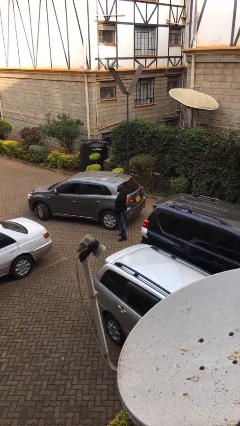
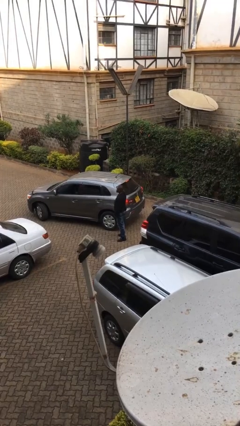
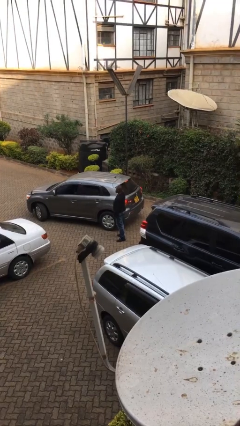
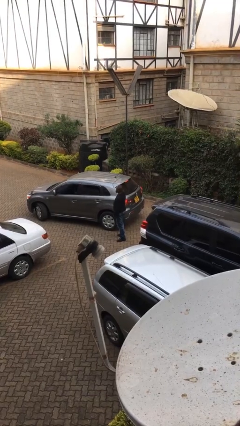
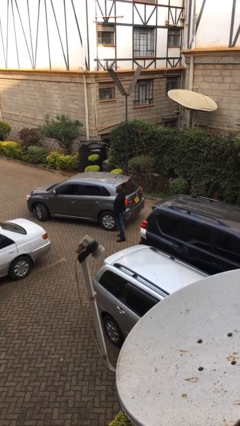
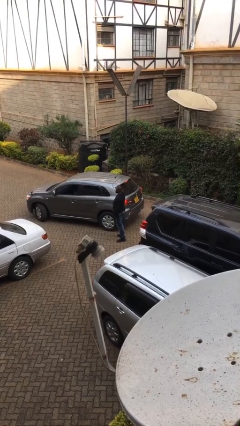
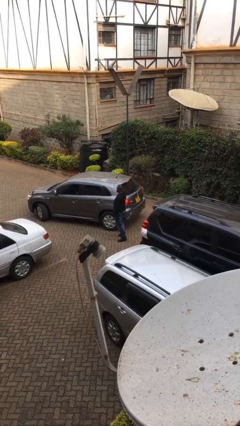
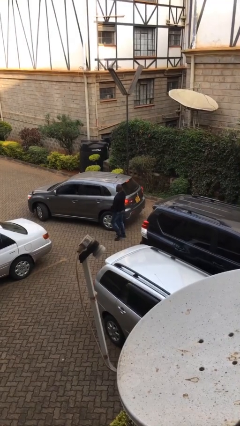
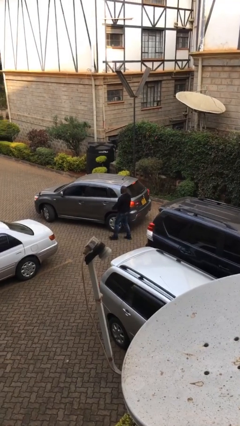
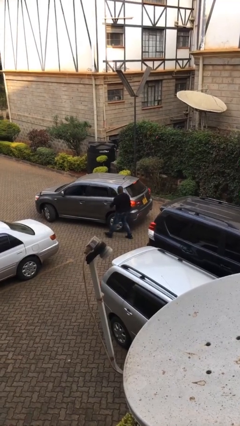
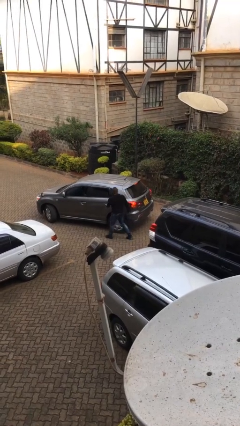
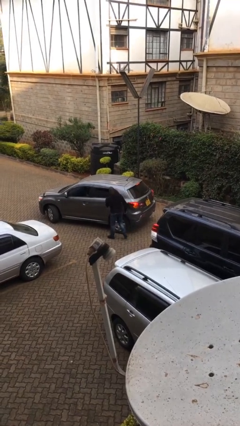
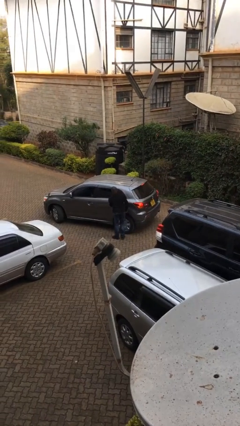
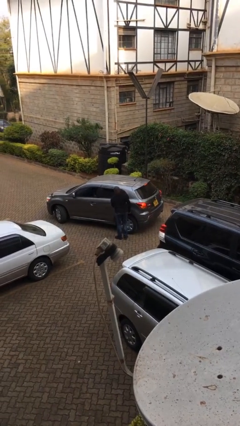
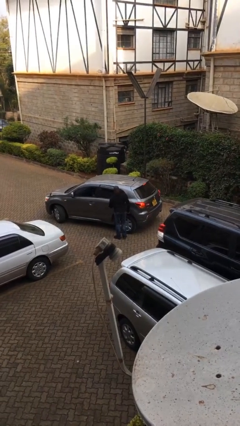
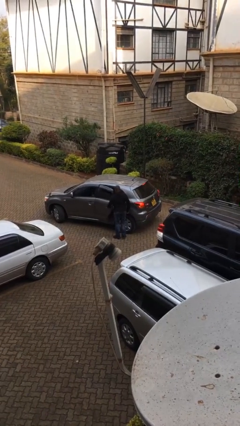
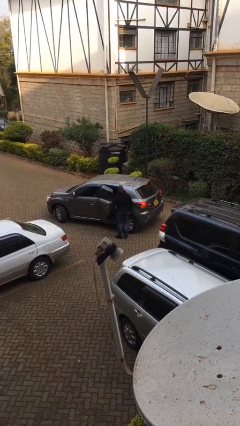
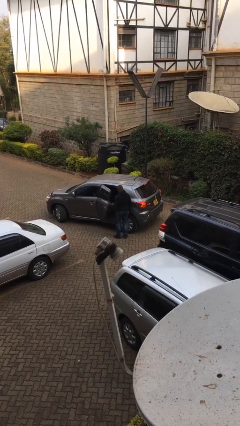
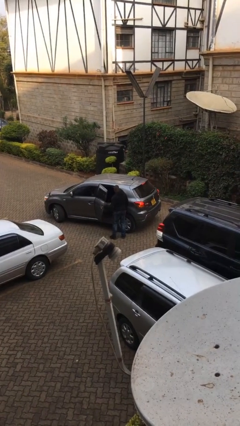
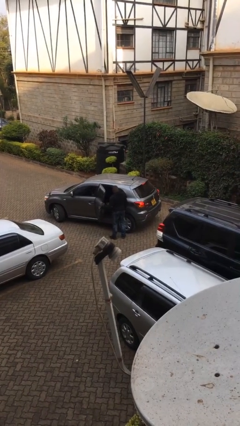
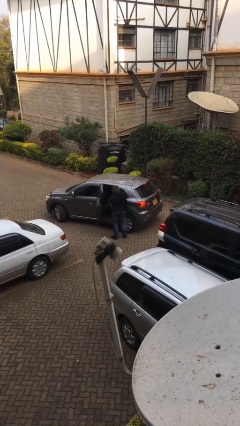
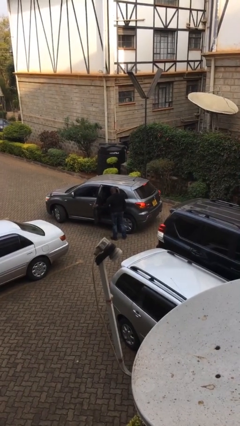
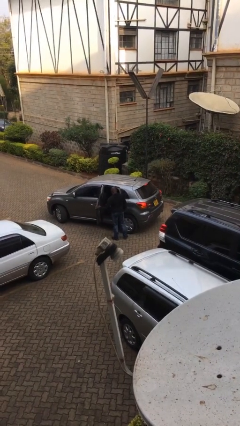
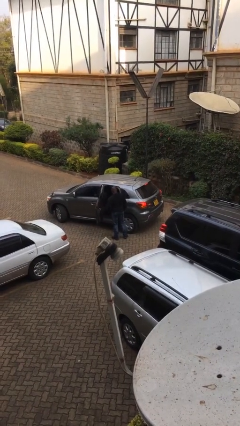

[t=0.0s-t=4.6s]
person opens car door

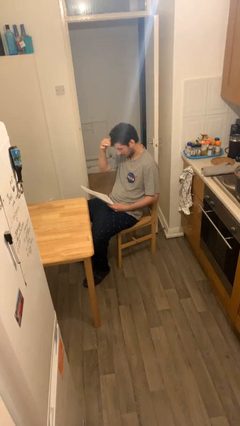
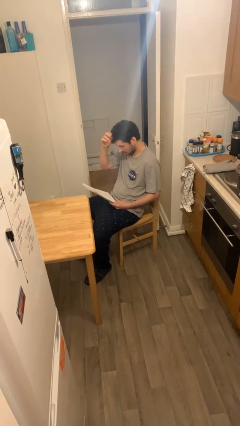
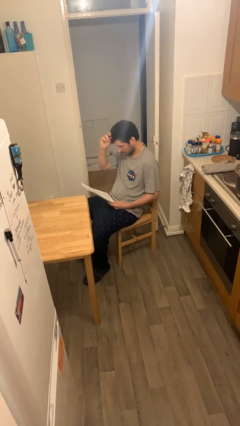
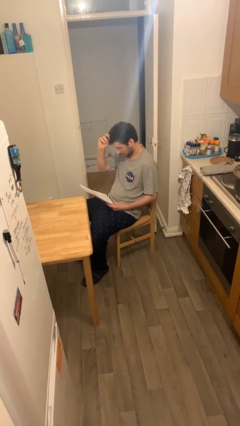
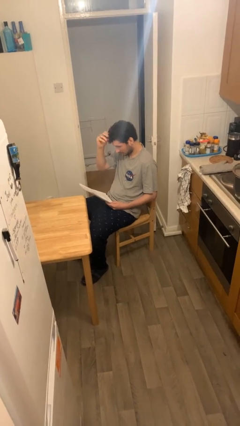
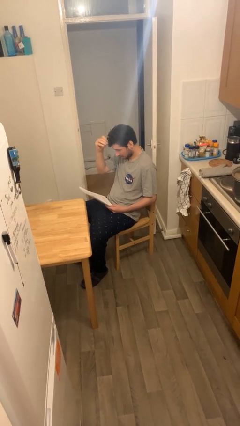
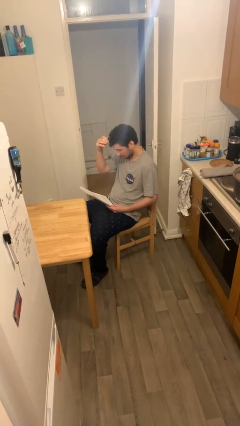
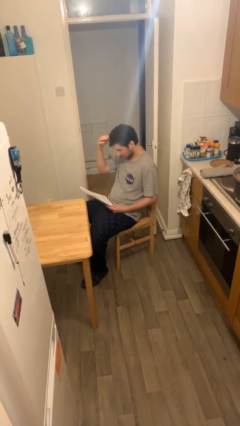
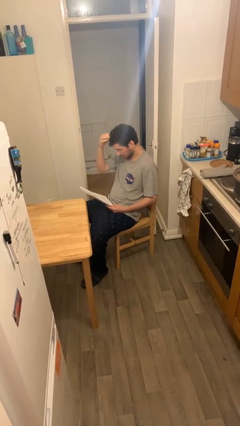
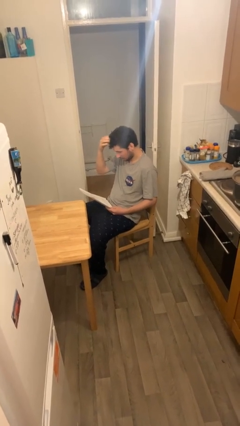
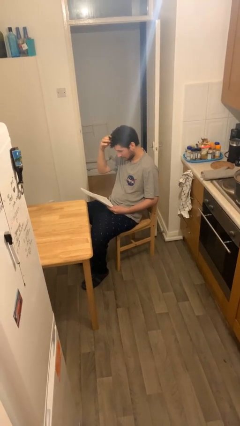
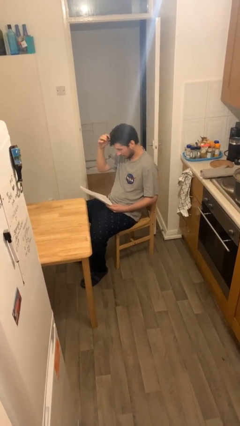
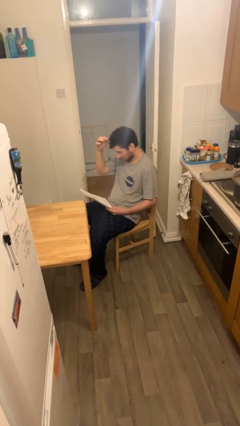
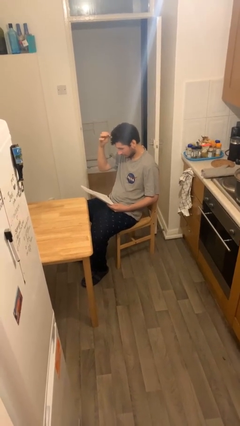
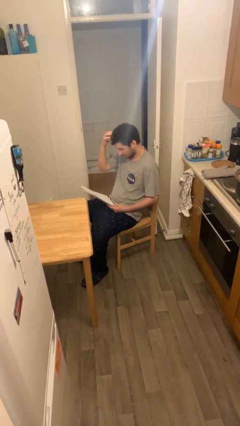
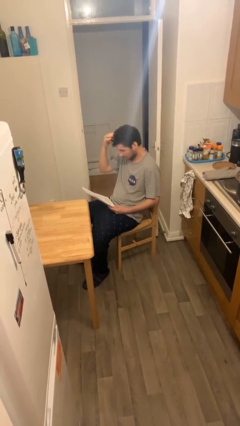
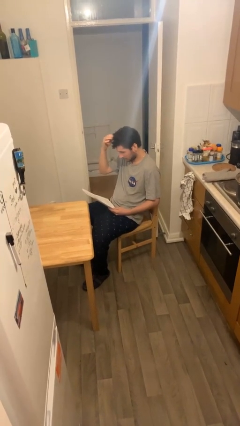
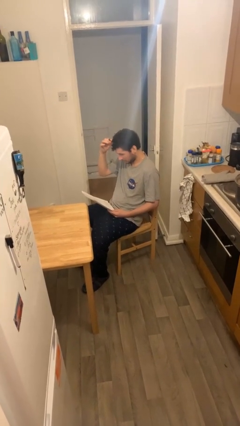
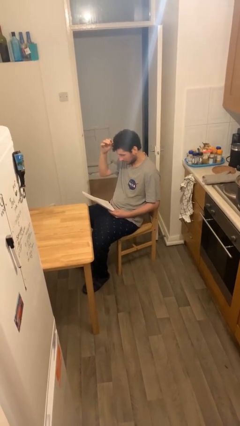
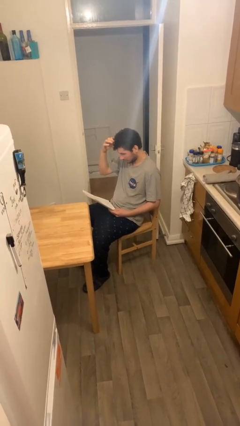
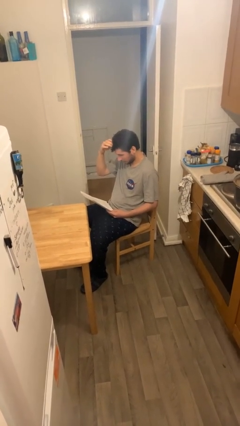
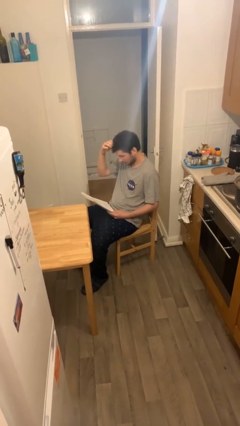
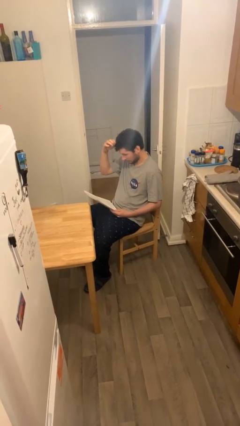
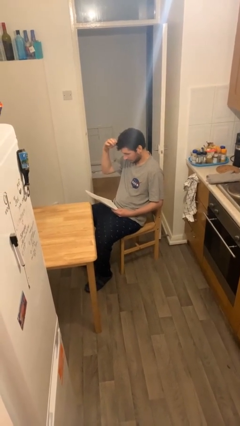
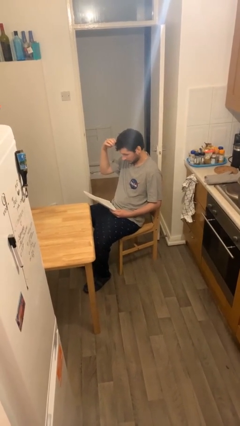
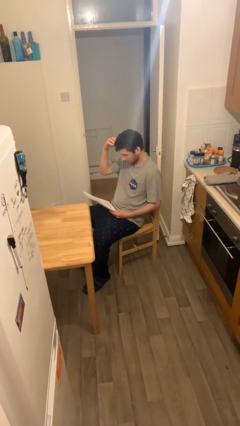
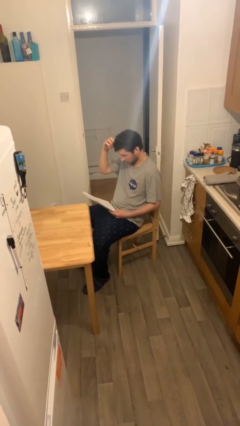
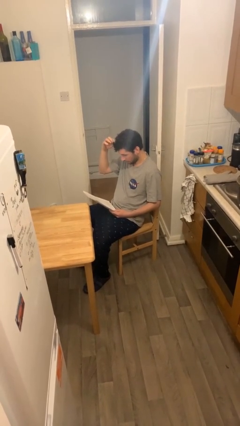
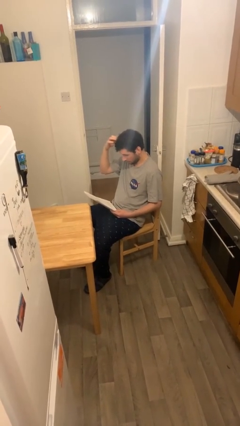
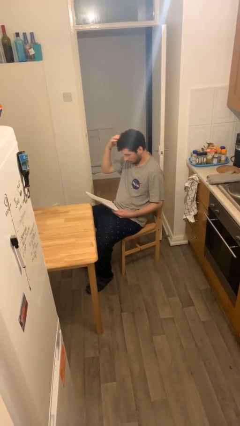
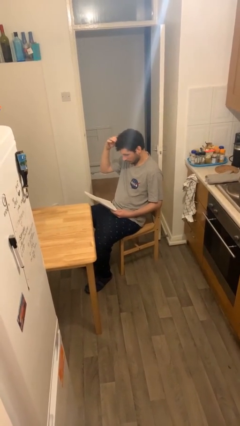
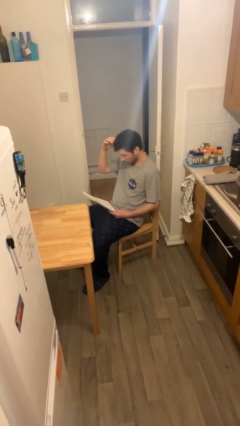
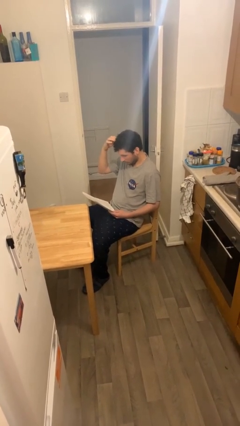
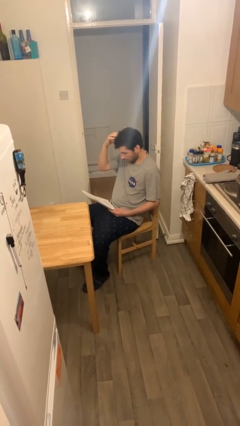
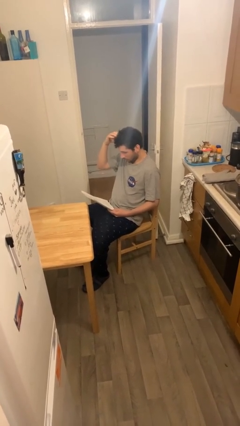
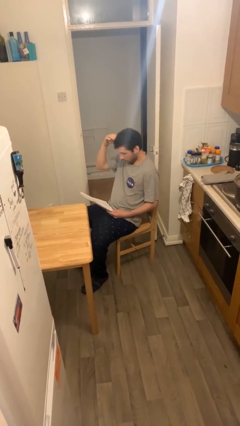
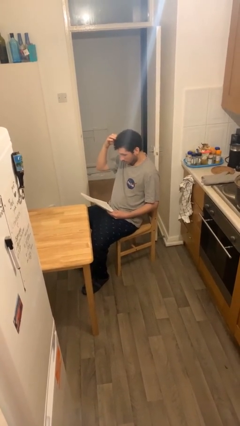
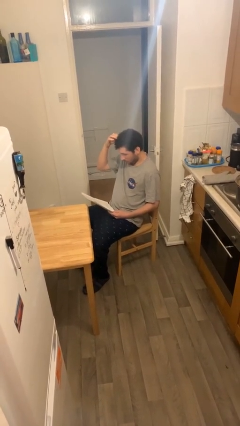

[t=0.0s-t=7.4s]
person reads document

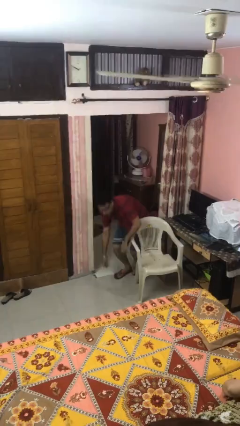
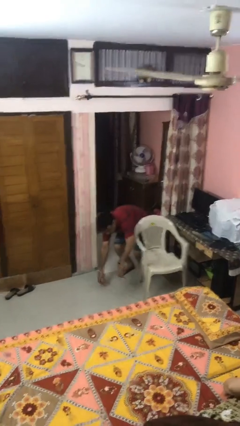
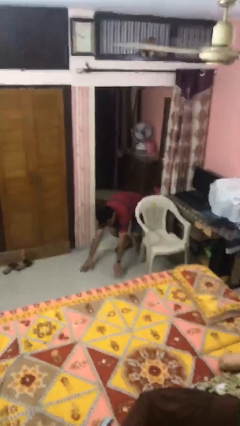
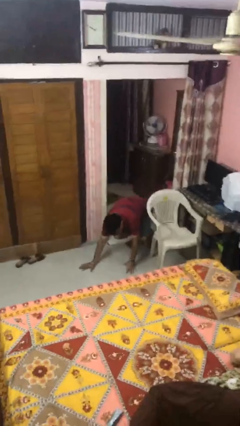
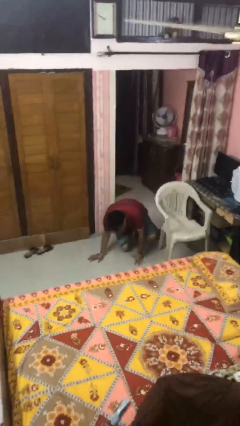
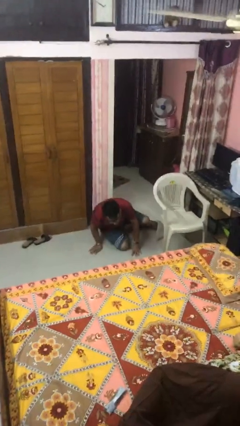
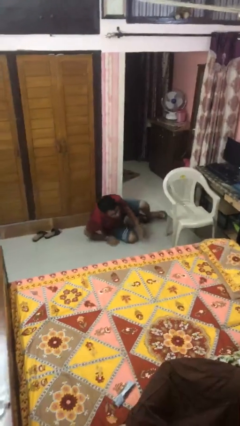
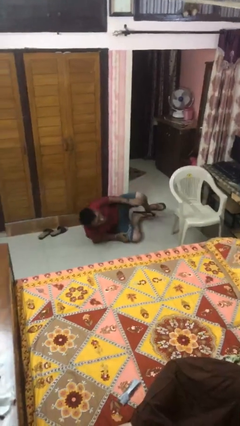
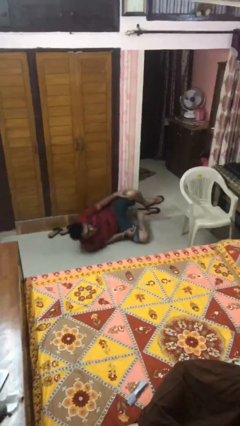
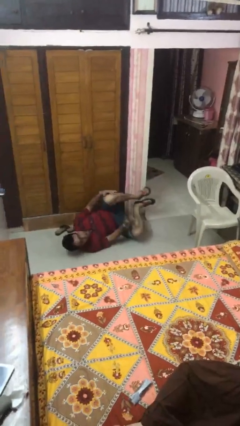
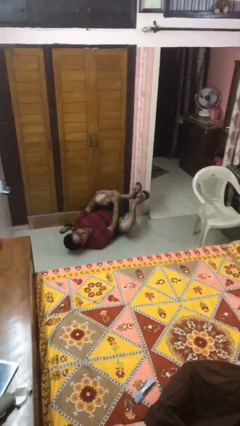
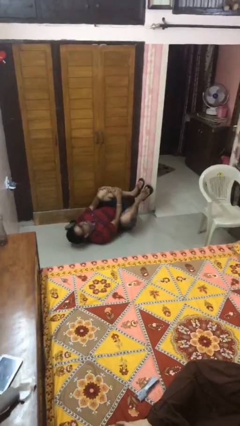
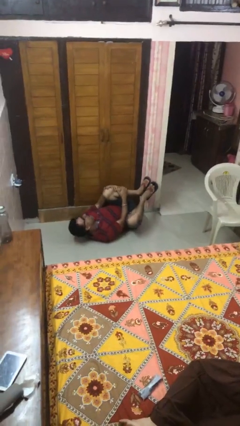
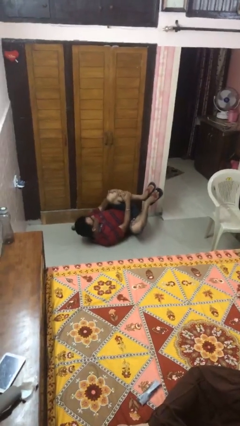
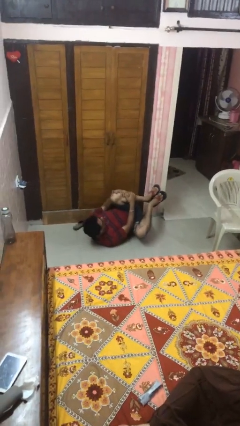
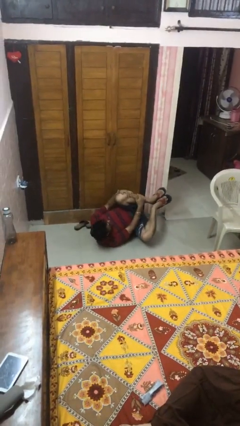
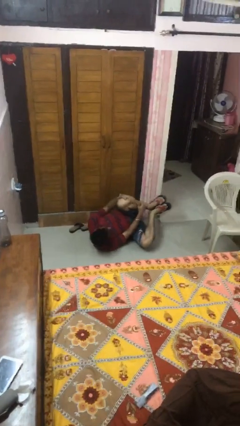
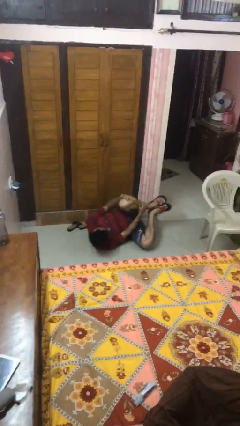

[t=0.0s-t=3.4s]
person lies down on floor

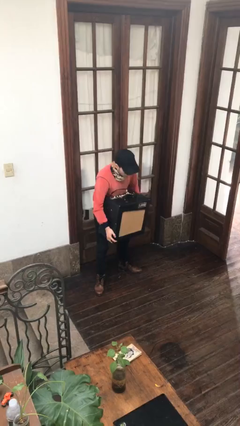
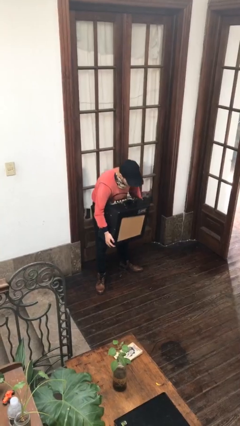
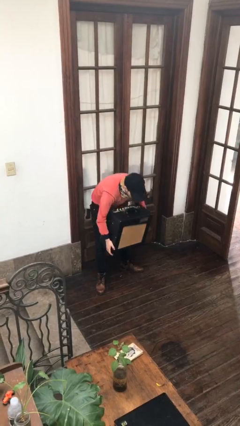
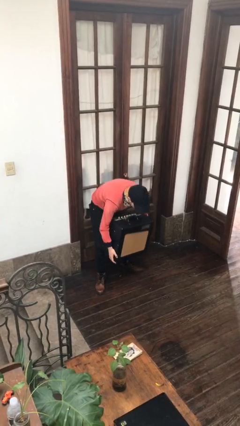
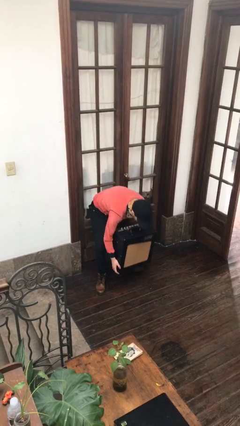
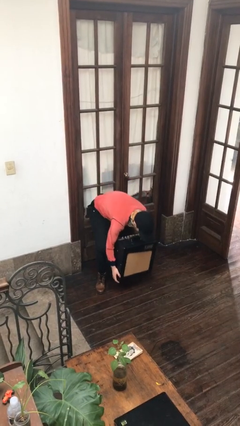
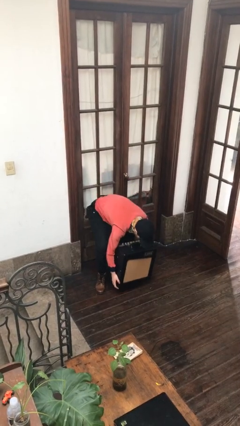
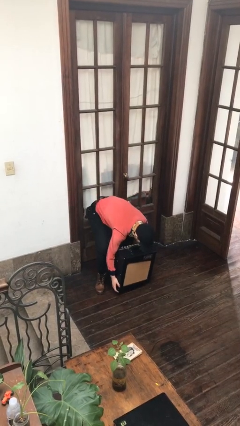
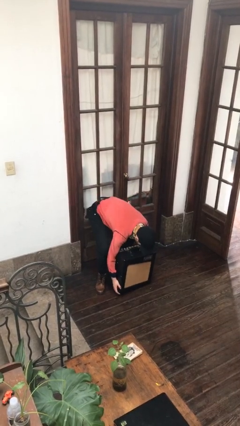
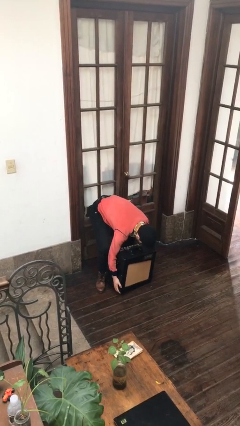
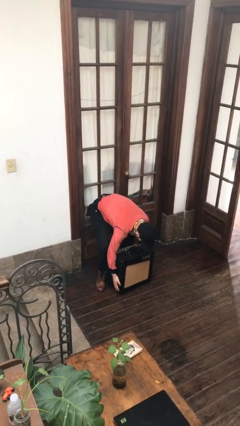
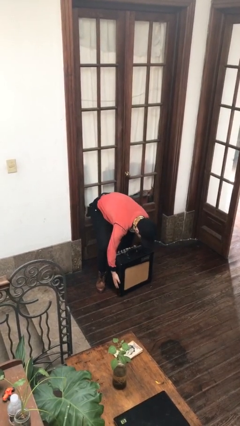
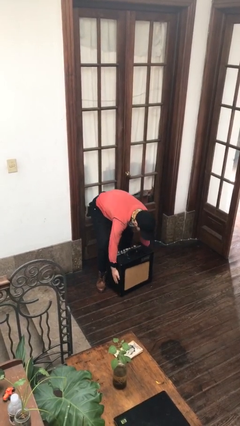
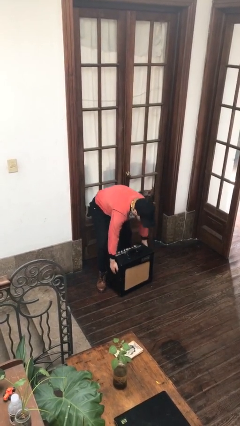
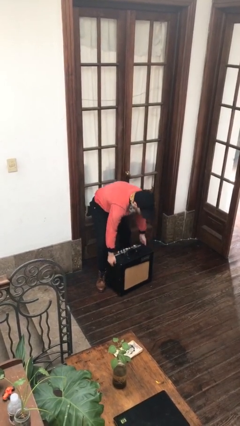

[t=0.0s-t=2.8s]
person puts down object on floor
